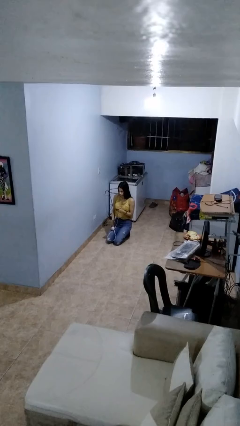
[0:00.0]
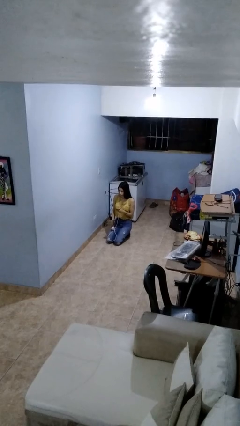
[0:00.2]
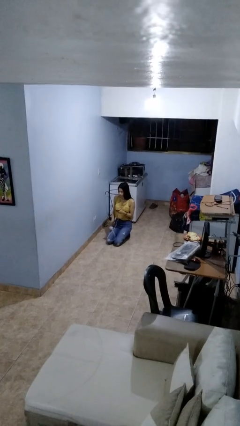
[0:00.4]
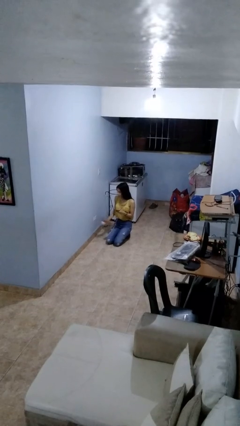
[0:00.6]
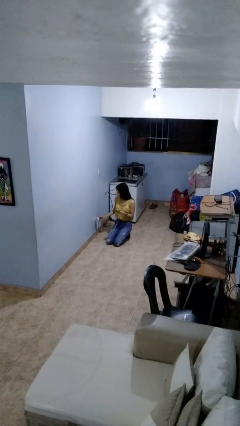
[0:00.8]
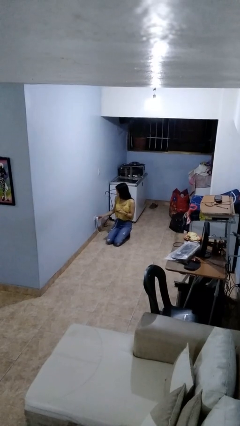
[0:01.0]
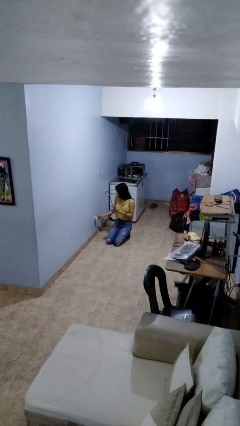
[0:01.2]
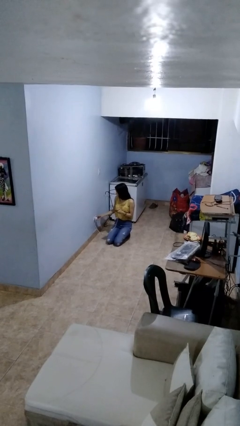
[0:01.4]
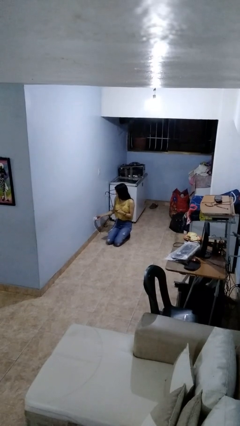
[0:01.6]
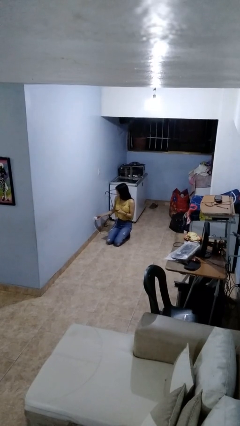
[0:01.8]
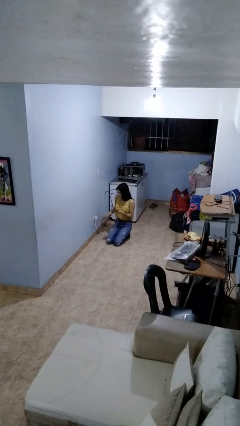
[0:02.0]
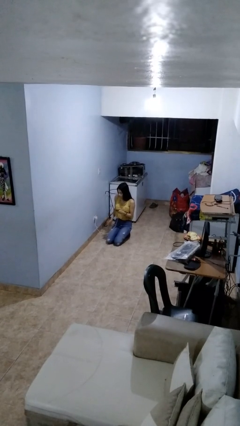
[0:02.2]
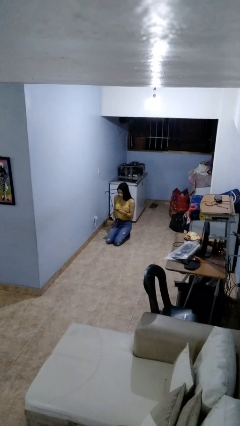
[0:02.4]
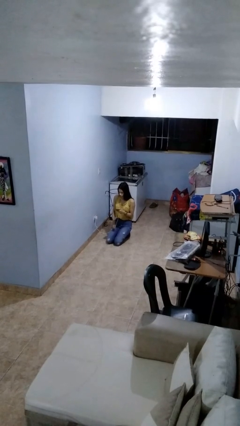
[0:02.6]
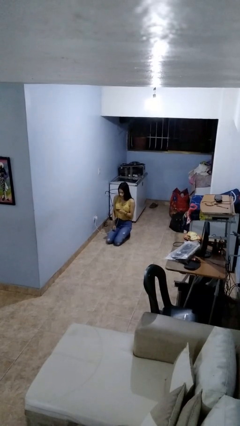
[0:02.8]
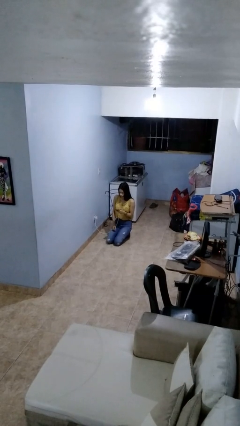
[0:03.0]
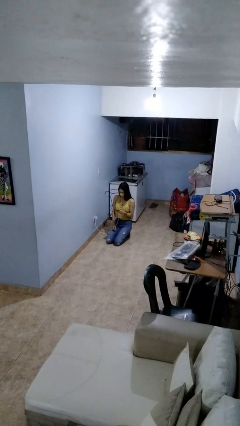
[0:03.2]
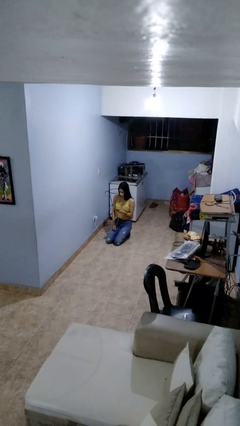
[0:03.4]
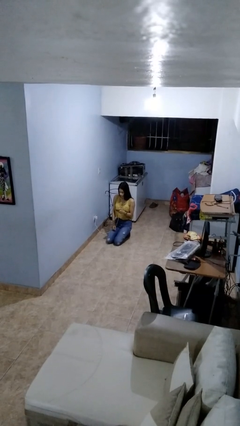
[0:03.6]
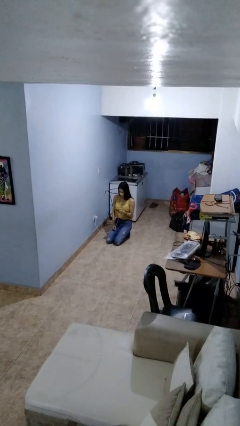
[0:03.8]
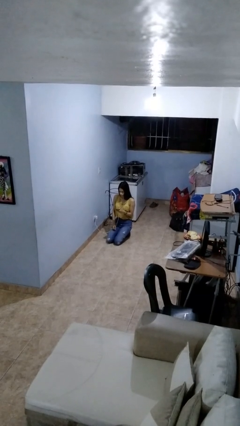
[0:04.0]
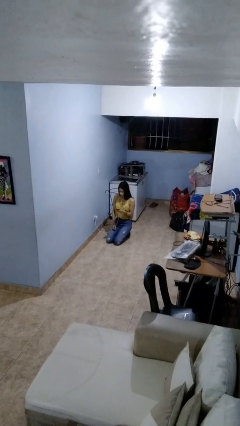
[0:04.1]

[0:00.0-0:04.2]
person plugs into electrical socket

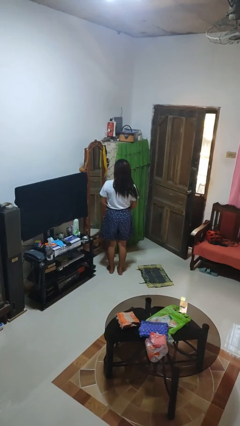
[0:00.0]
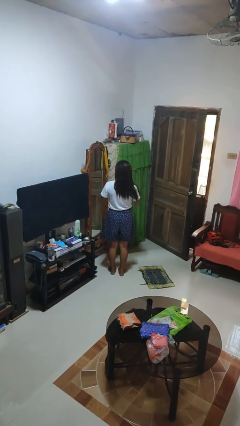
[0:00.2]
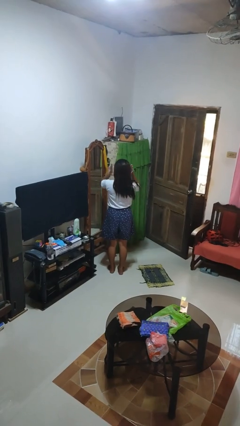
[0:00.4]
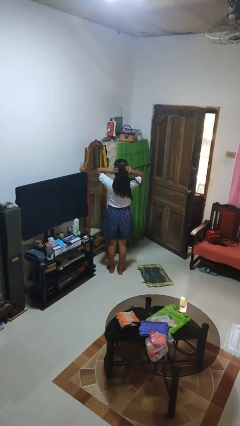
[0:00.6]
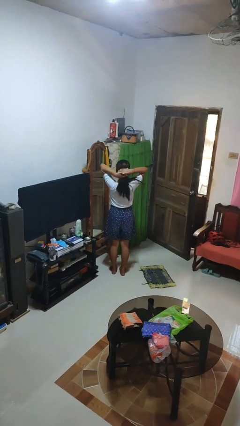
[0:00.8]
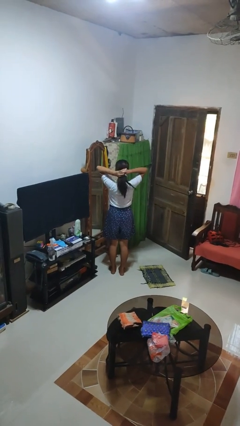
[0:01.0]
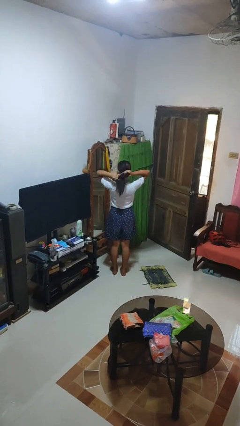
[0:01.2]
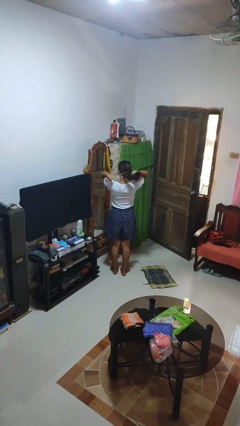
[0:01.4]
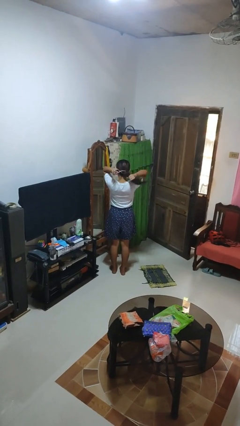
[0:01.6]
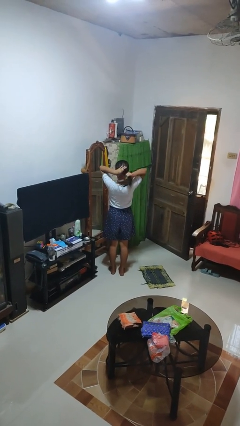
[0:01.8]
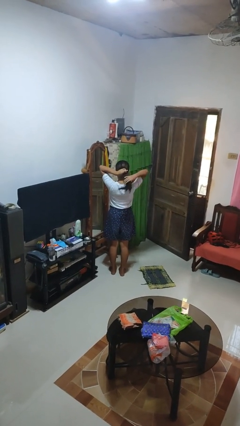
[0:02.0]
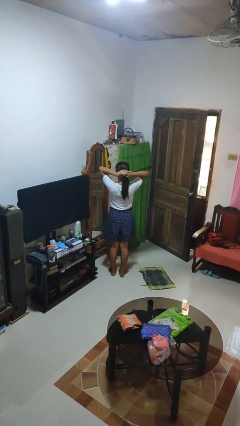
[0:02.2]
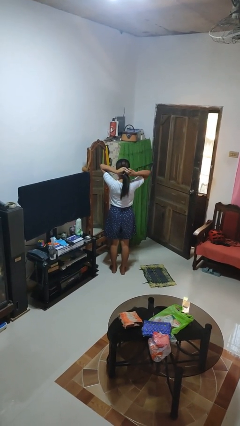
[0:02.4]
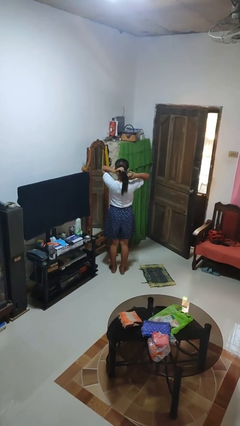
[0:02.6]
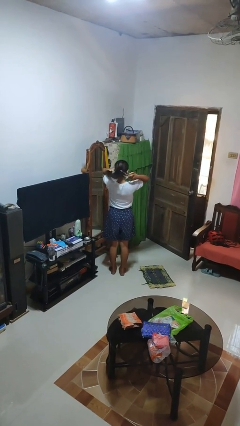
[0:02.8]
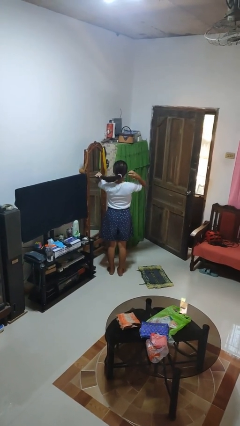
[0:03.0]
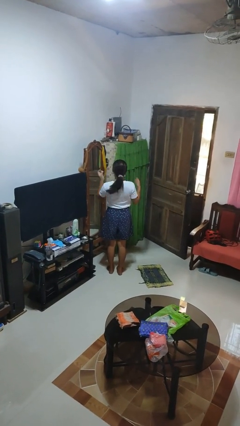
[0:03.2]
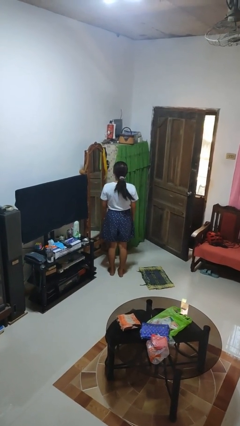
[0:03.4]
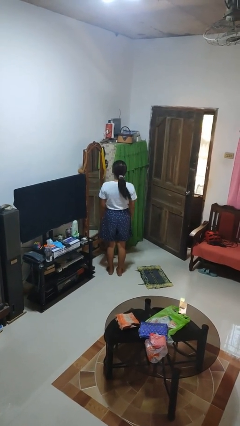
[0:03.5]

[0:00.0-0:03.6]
person puts hair in ponytail

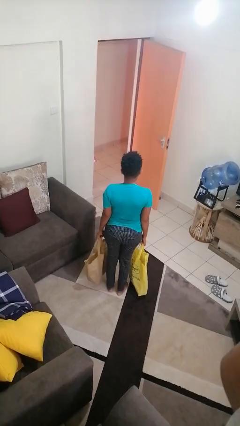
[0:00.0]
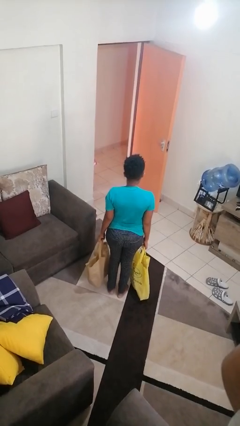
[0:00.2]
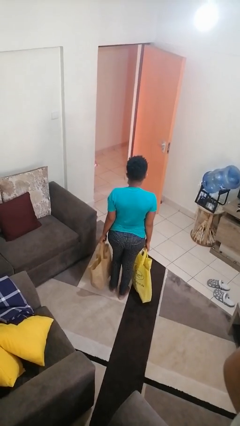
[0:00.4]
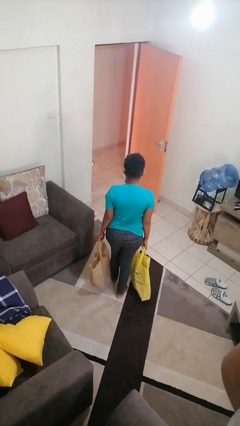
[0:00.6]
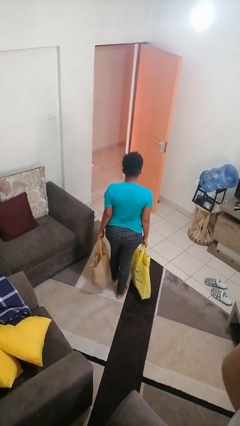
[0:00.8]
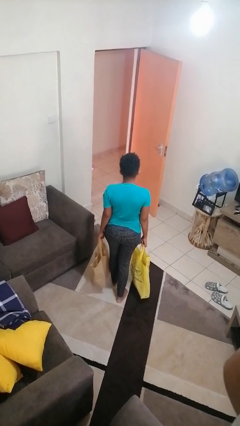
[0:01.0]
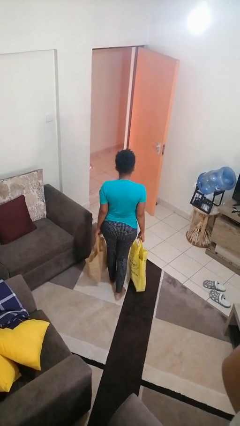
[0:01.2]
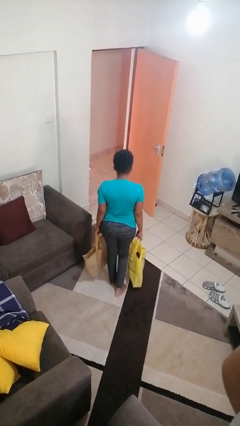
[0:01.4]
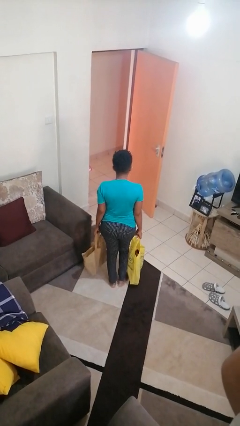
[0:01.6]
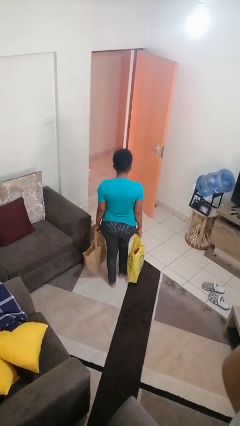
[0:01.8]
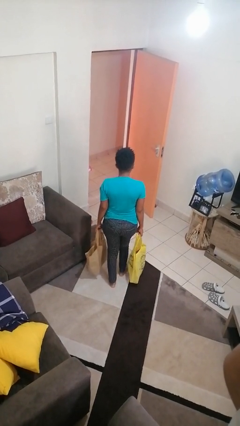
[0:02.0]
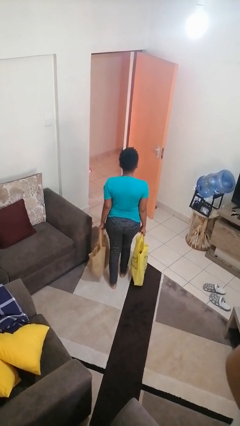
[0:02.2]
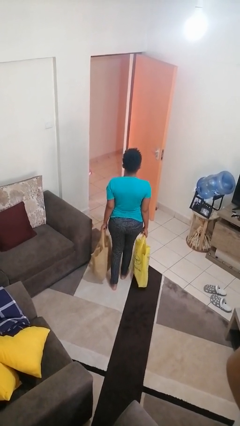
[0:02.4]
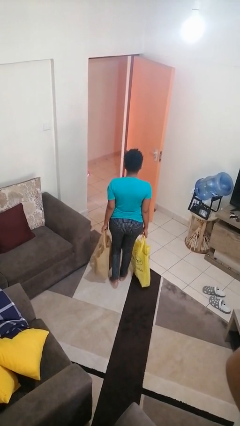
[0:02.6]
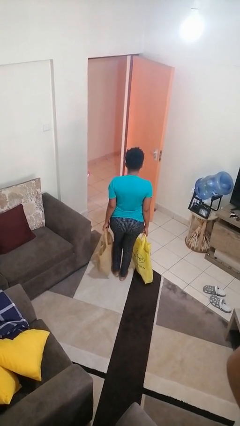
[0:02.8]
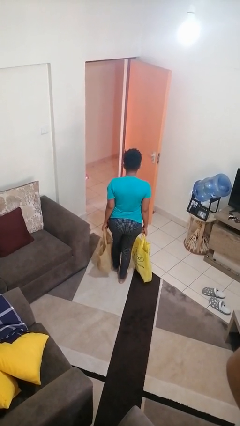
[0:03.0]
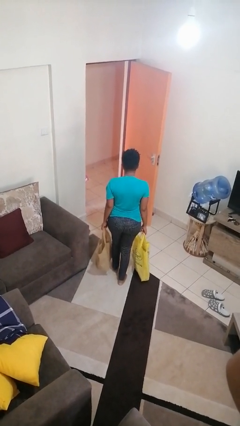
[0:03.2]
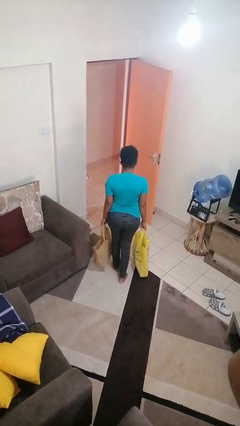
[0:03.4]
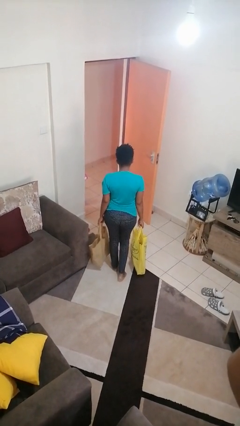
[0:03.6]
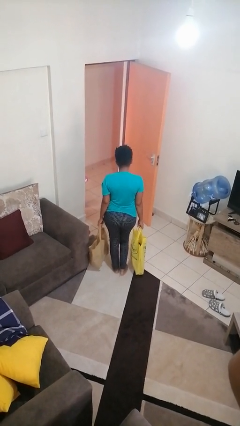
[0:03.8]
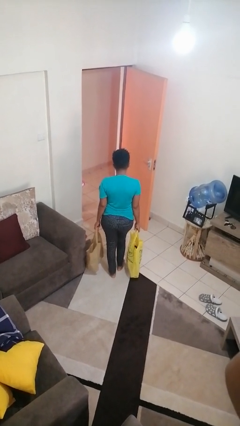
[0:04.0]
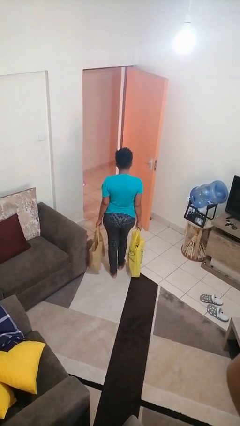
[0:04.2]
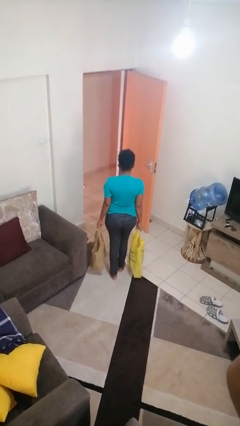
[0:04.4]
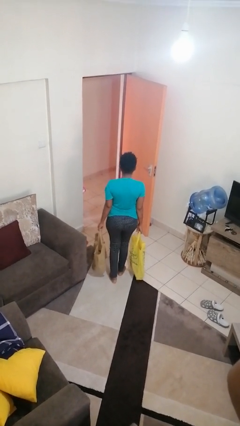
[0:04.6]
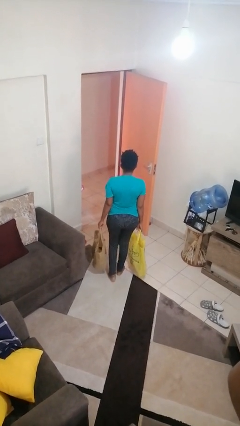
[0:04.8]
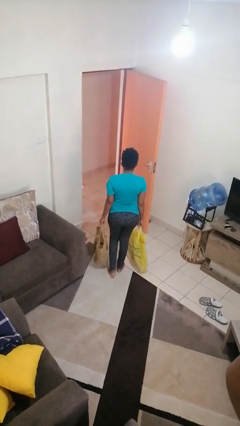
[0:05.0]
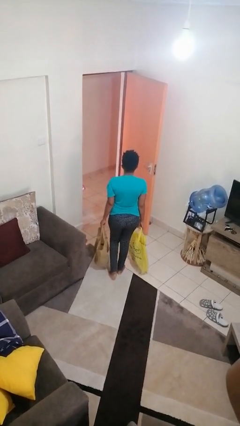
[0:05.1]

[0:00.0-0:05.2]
person carries groceries

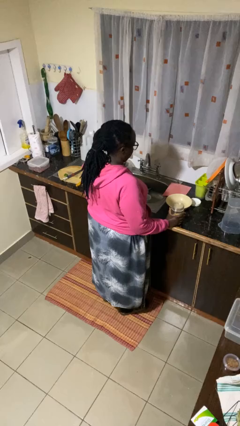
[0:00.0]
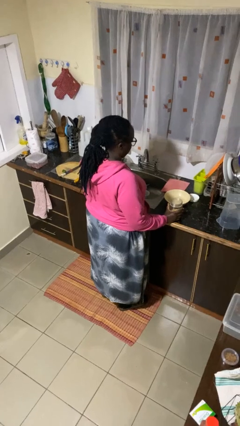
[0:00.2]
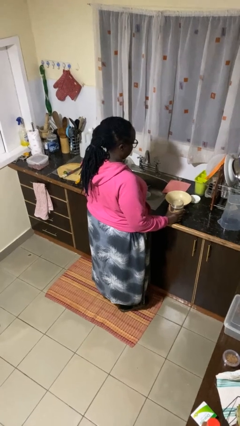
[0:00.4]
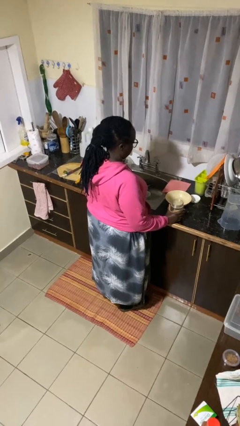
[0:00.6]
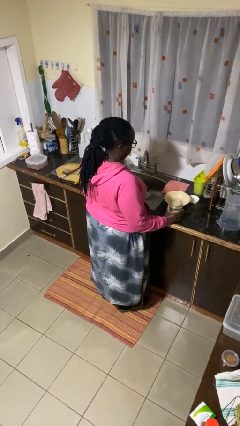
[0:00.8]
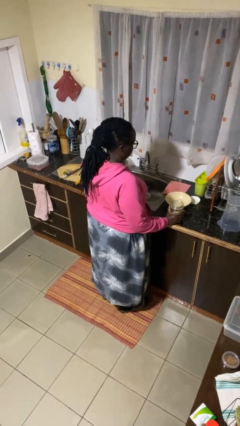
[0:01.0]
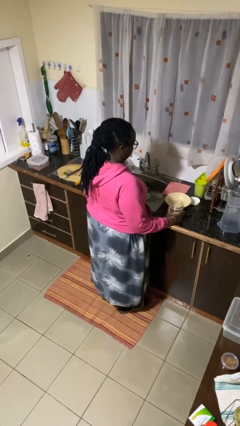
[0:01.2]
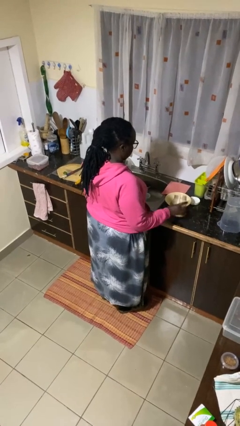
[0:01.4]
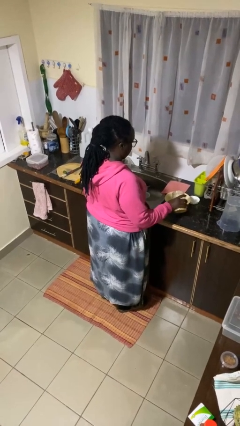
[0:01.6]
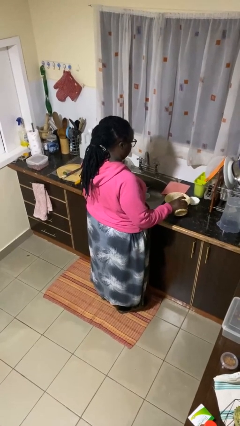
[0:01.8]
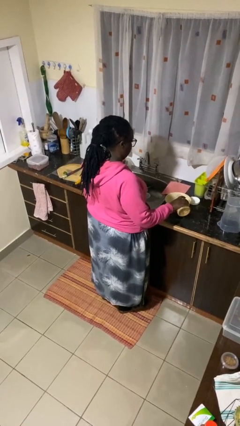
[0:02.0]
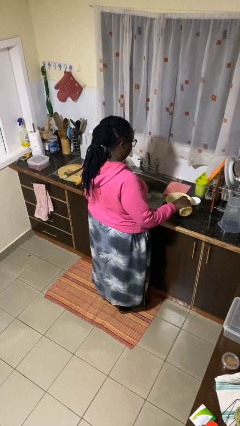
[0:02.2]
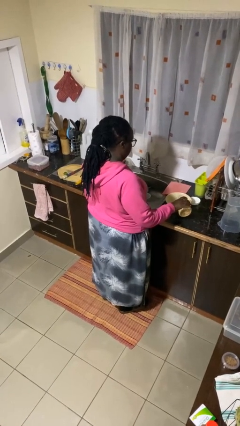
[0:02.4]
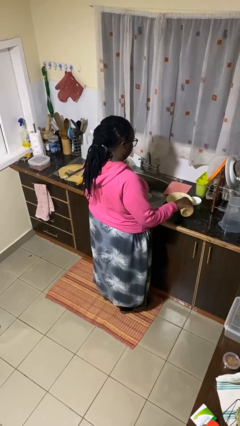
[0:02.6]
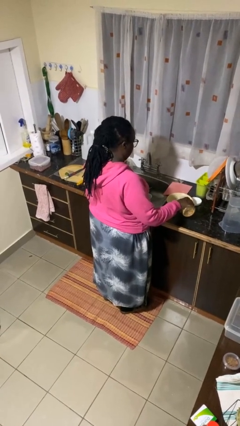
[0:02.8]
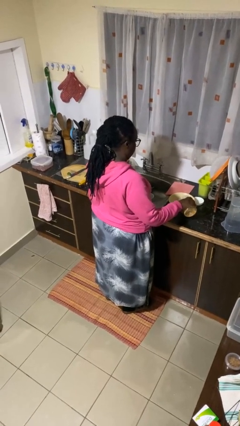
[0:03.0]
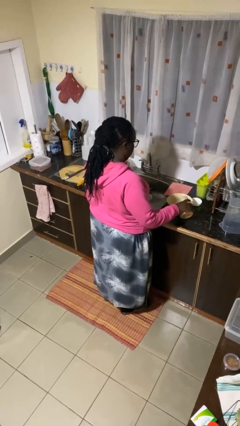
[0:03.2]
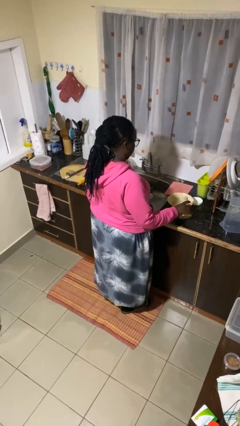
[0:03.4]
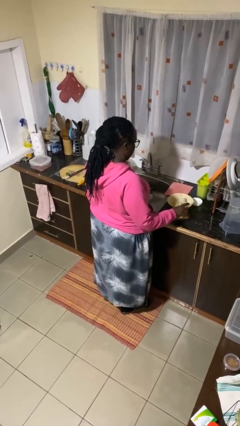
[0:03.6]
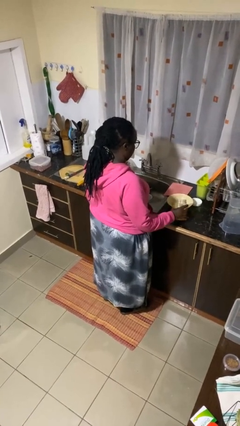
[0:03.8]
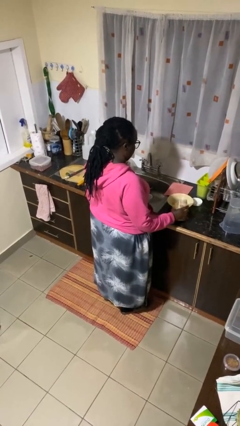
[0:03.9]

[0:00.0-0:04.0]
person pours into bowl

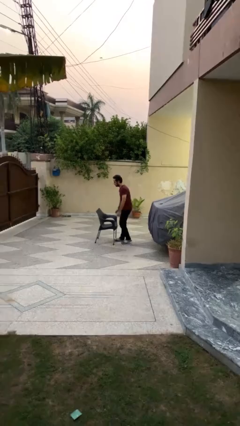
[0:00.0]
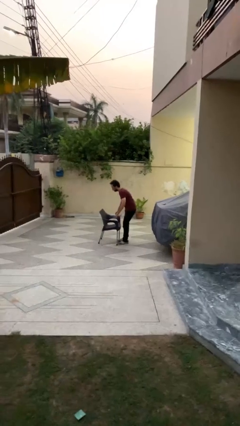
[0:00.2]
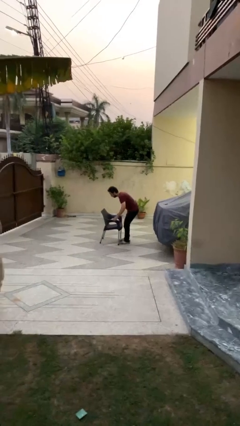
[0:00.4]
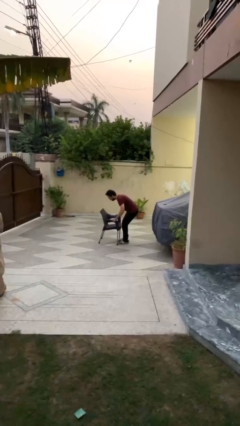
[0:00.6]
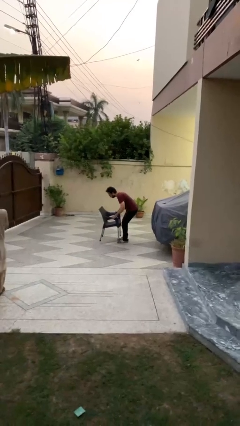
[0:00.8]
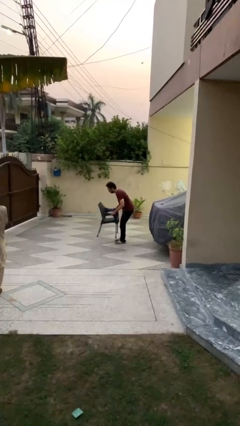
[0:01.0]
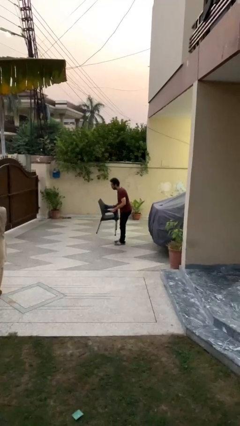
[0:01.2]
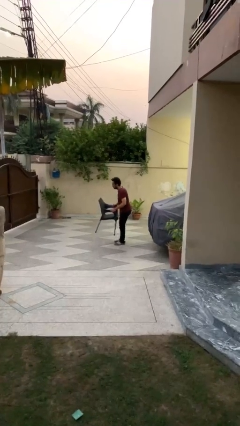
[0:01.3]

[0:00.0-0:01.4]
person picks up object from floor
